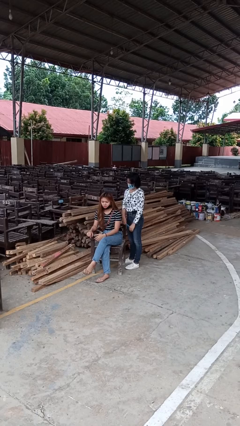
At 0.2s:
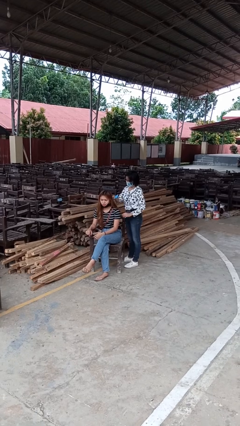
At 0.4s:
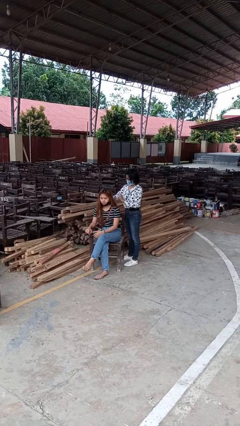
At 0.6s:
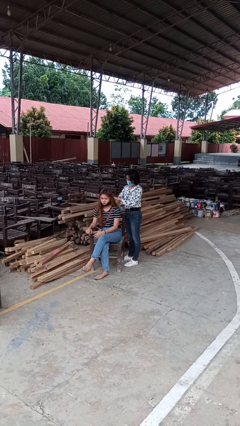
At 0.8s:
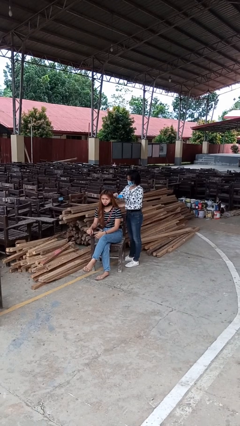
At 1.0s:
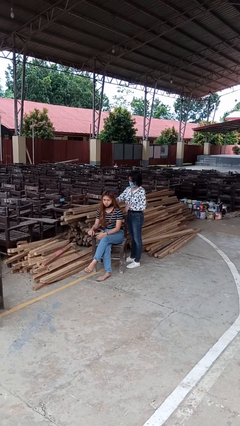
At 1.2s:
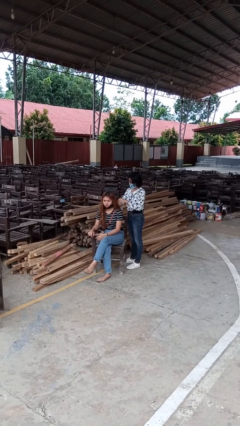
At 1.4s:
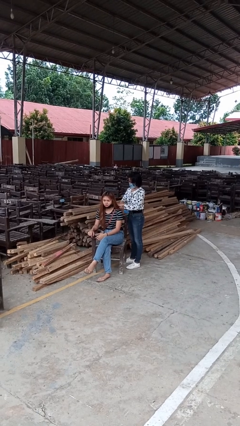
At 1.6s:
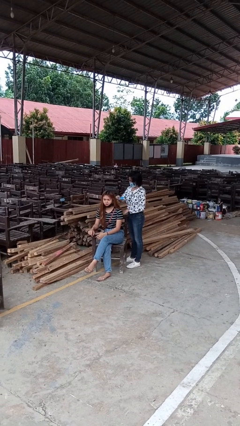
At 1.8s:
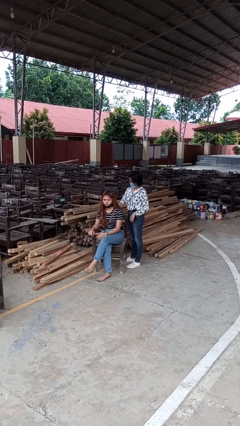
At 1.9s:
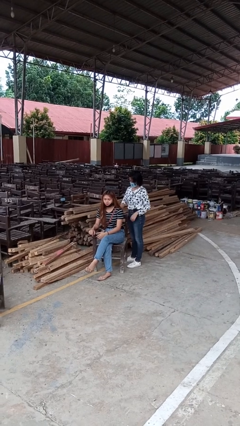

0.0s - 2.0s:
person brushes hair of person

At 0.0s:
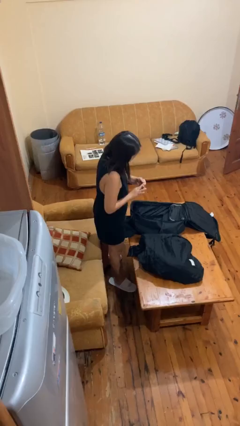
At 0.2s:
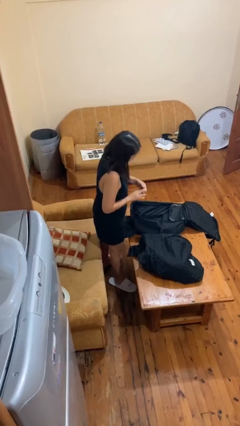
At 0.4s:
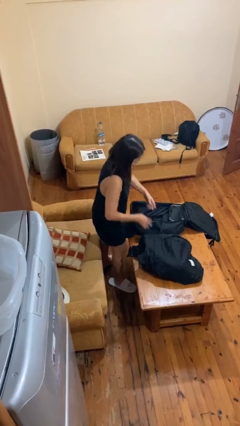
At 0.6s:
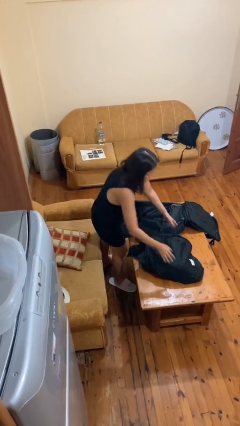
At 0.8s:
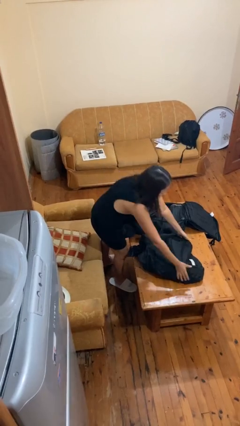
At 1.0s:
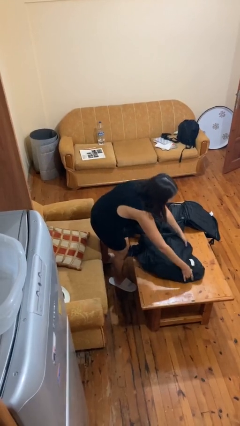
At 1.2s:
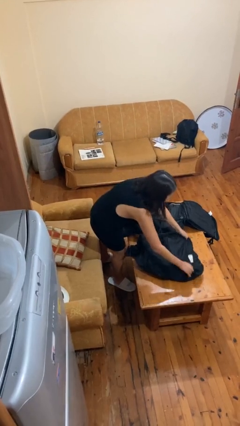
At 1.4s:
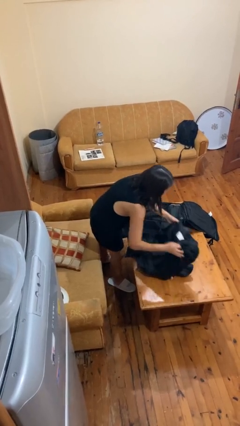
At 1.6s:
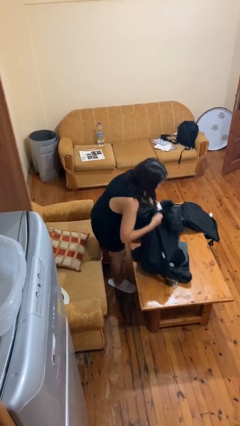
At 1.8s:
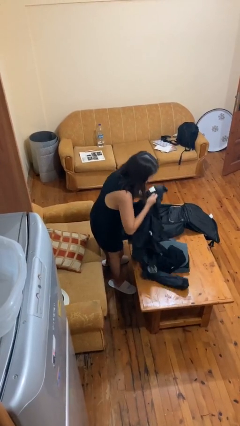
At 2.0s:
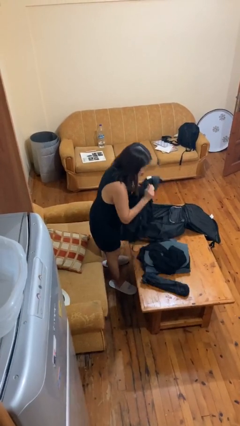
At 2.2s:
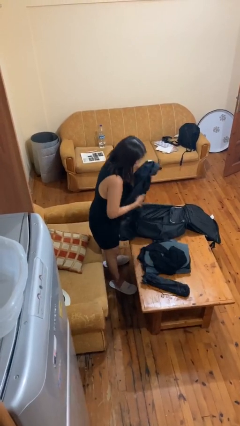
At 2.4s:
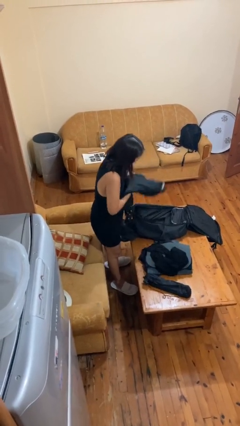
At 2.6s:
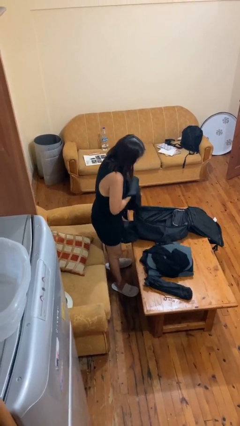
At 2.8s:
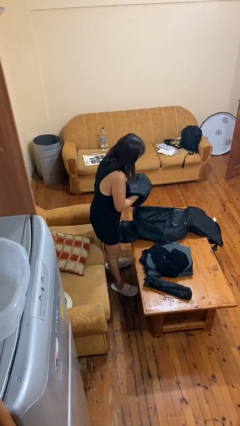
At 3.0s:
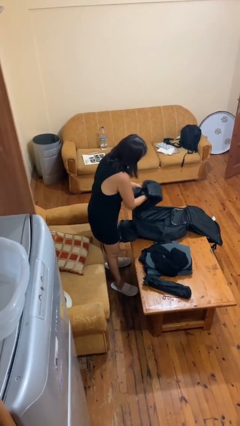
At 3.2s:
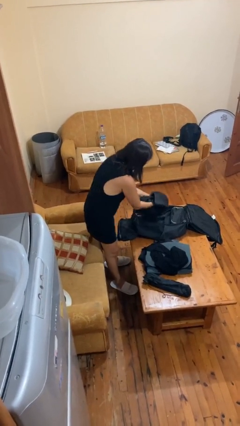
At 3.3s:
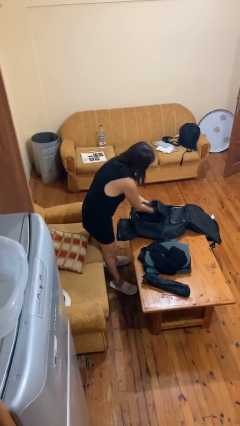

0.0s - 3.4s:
person loads clothes into suitcase

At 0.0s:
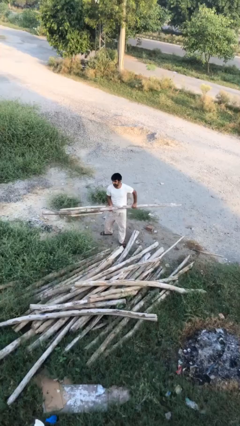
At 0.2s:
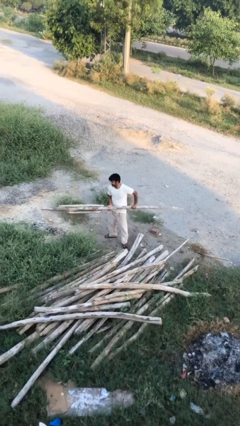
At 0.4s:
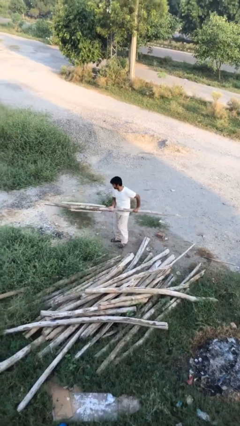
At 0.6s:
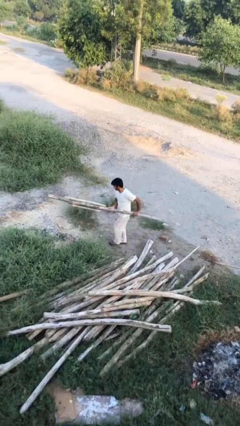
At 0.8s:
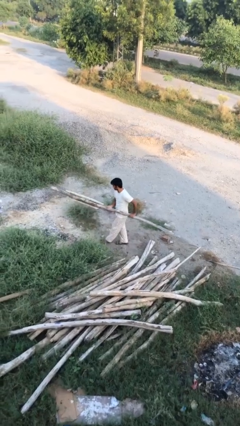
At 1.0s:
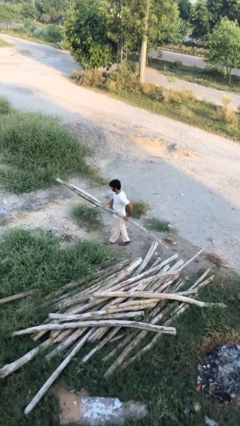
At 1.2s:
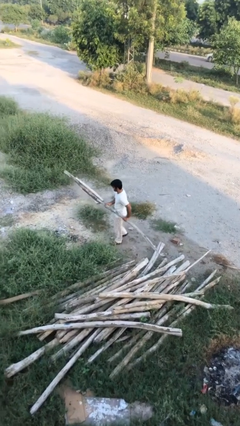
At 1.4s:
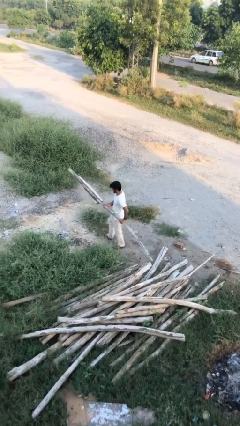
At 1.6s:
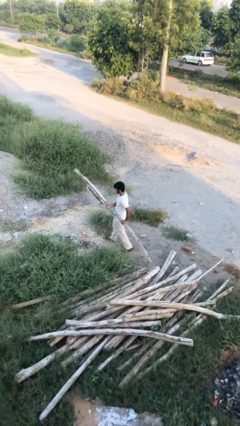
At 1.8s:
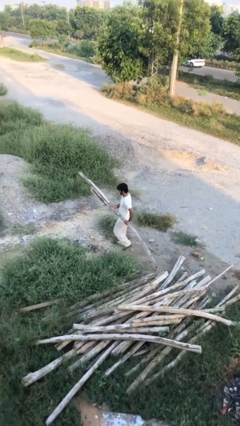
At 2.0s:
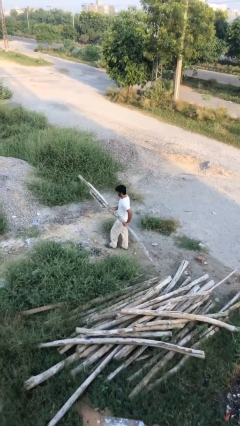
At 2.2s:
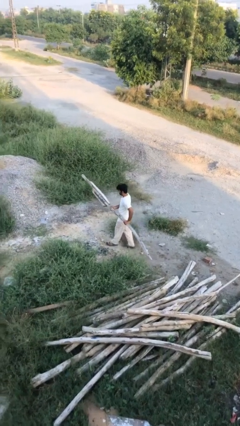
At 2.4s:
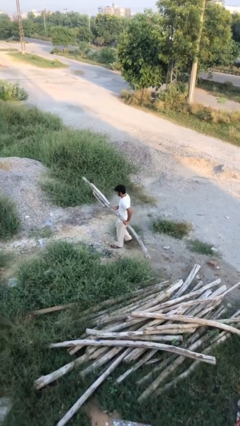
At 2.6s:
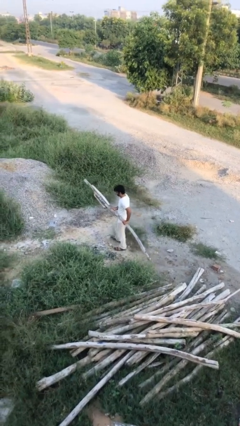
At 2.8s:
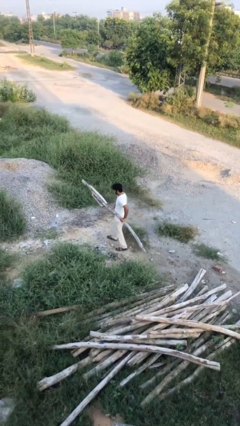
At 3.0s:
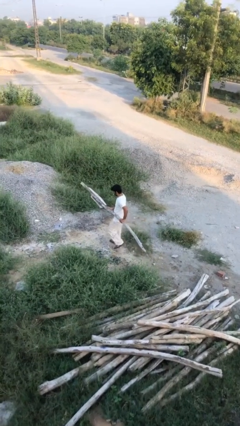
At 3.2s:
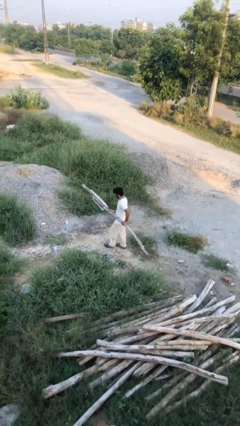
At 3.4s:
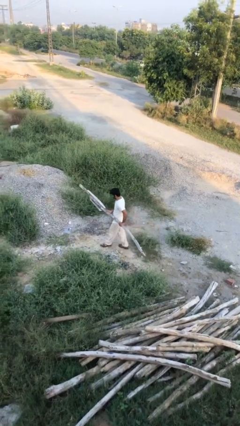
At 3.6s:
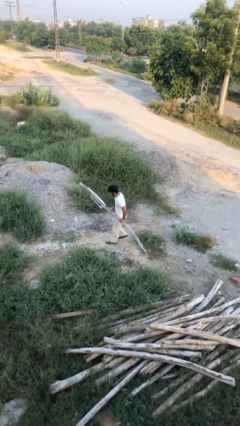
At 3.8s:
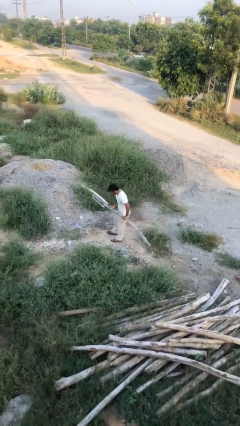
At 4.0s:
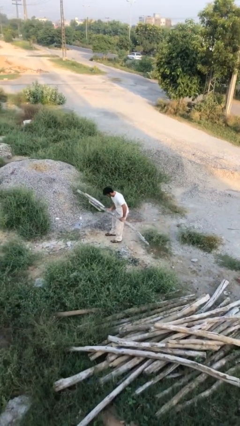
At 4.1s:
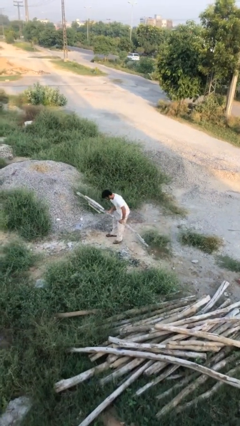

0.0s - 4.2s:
person carries heavy object

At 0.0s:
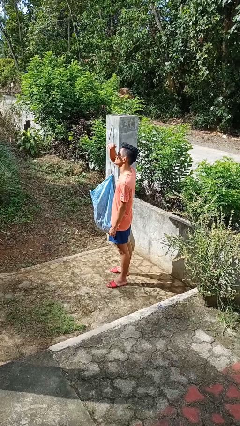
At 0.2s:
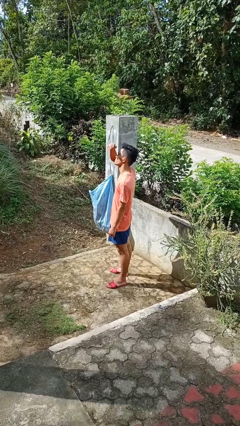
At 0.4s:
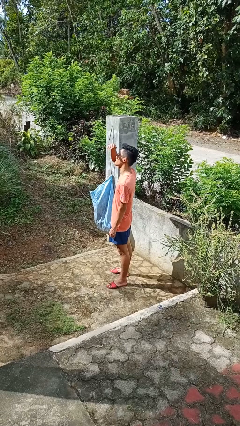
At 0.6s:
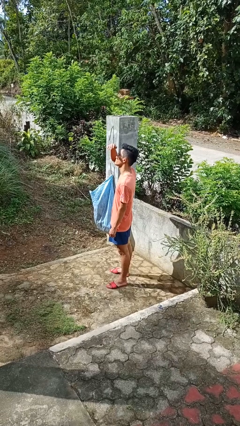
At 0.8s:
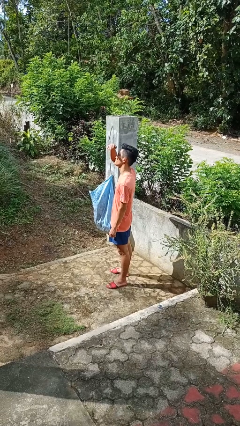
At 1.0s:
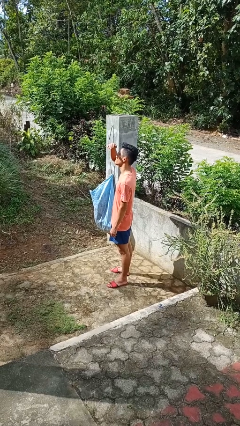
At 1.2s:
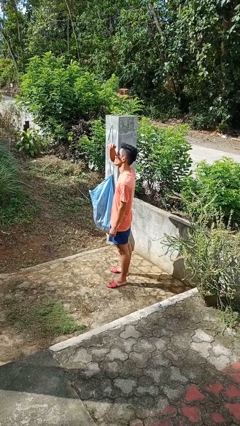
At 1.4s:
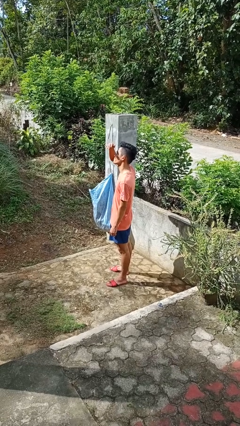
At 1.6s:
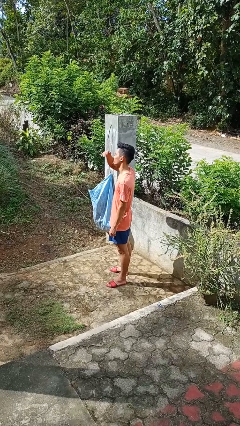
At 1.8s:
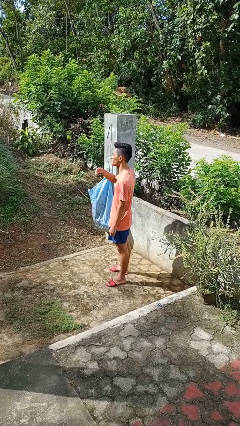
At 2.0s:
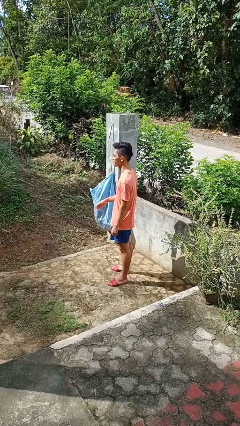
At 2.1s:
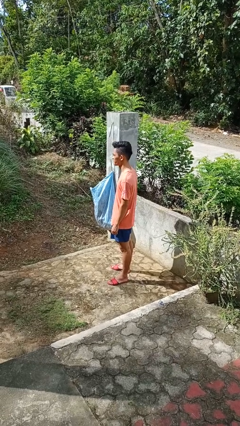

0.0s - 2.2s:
person shades eyes

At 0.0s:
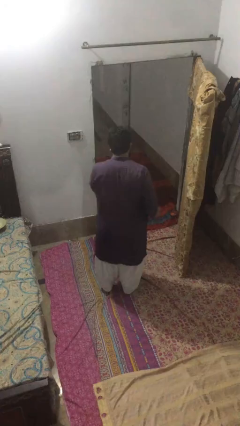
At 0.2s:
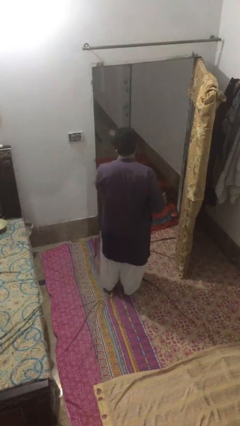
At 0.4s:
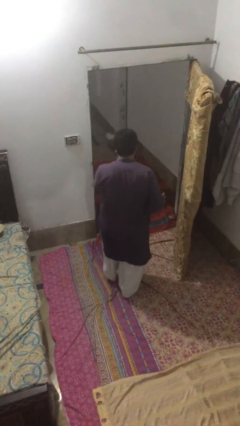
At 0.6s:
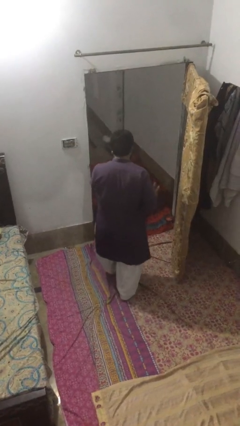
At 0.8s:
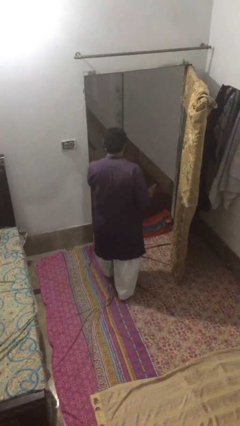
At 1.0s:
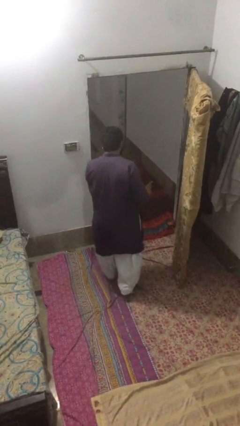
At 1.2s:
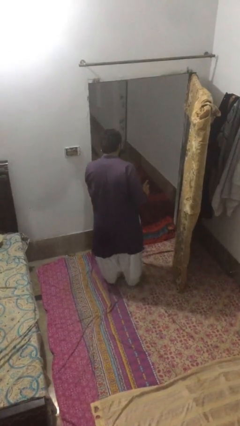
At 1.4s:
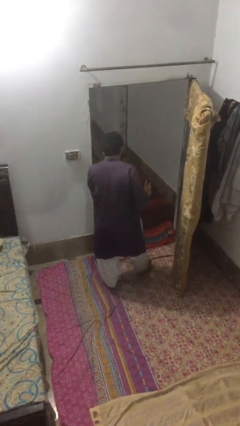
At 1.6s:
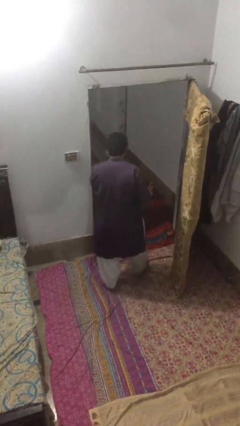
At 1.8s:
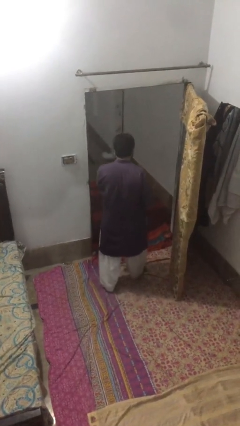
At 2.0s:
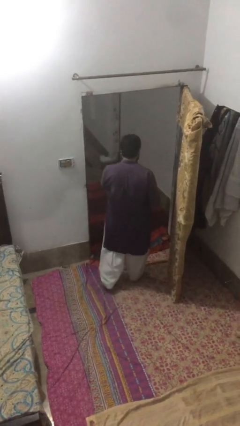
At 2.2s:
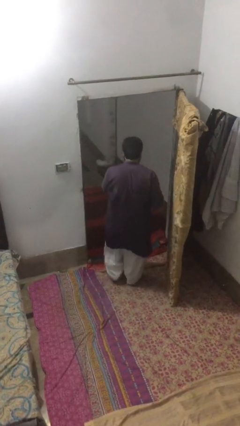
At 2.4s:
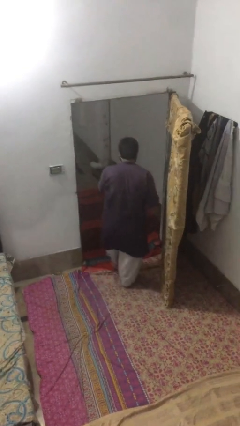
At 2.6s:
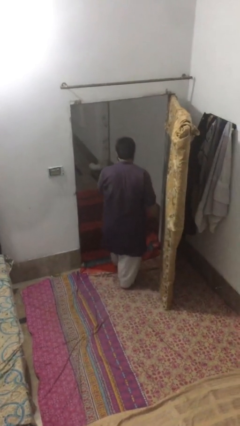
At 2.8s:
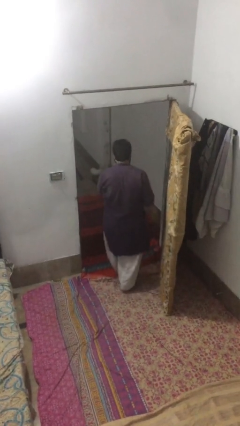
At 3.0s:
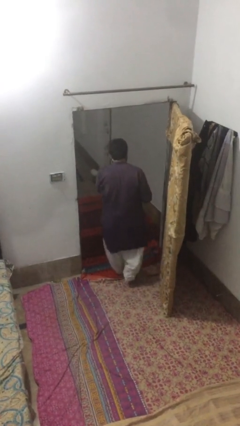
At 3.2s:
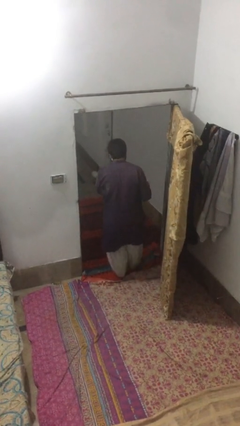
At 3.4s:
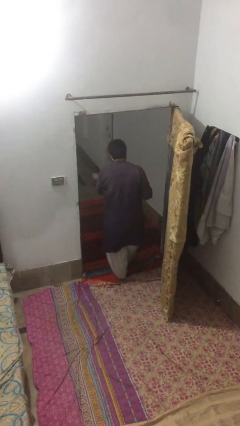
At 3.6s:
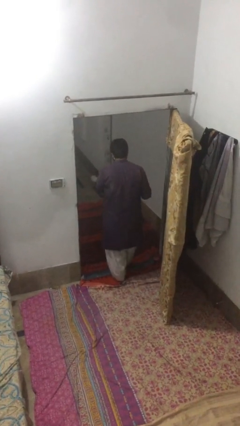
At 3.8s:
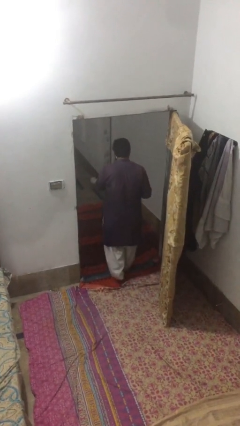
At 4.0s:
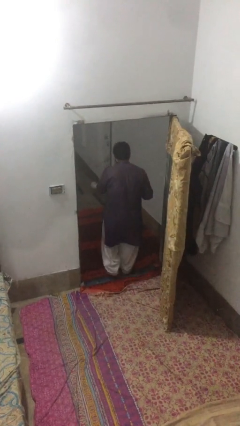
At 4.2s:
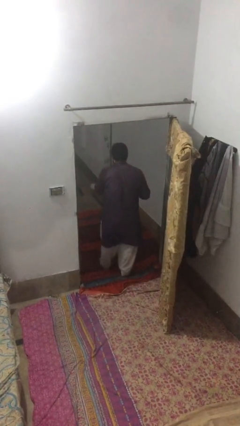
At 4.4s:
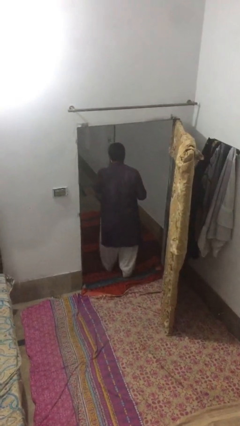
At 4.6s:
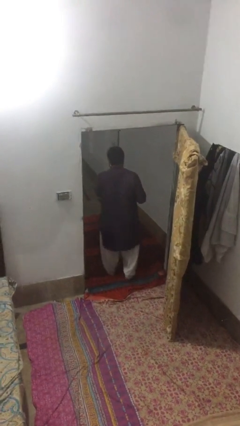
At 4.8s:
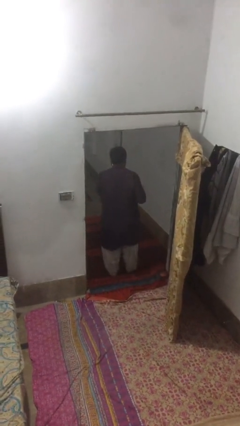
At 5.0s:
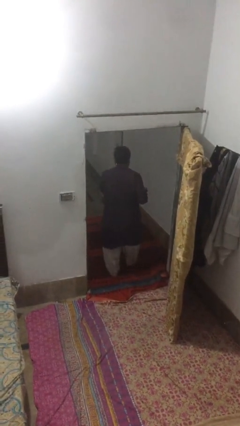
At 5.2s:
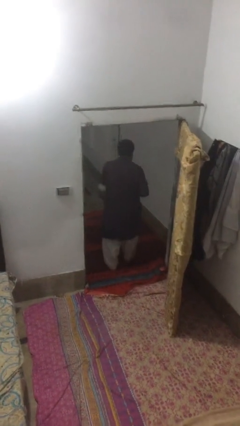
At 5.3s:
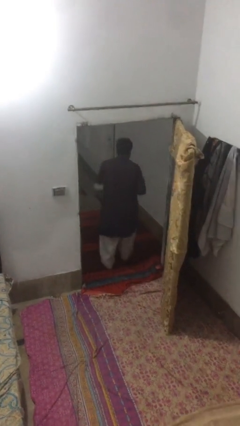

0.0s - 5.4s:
person exits scene through structure
